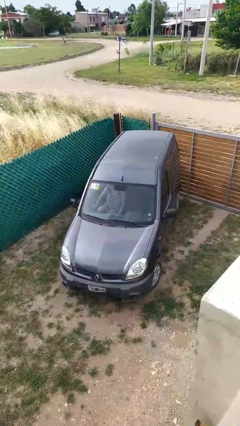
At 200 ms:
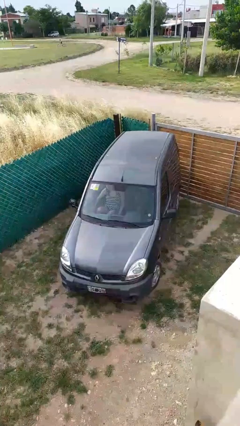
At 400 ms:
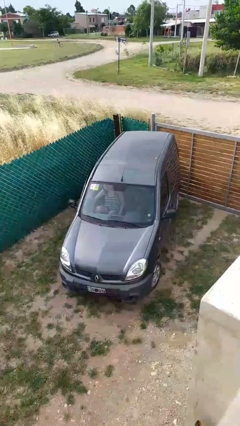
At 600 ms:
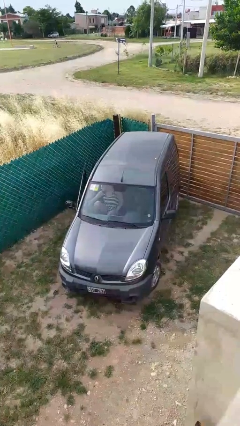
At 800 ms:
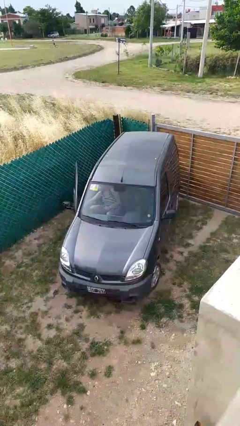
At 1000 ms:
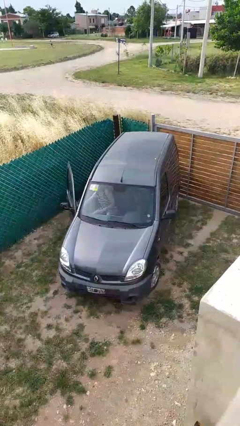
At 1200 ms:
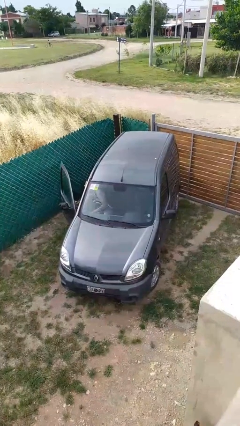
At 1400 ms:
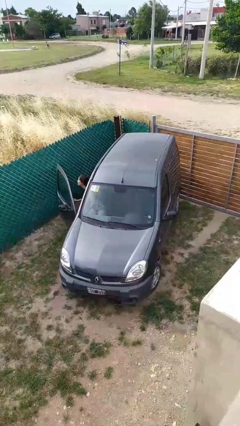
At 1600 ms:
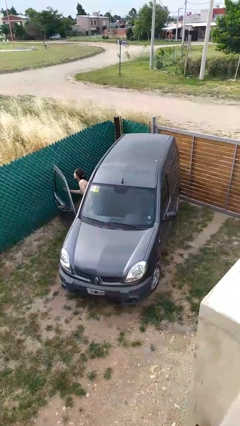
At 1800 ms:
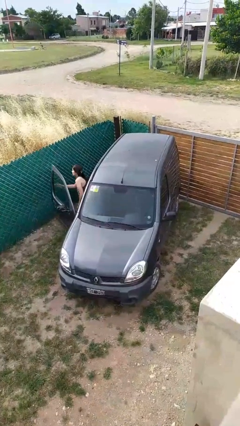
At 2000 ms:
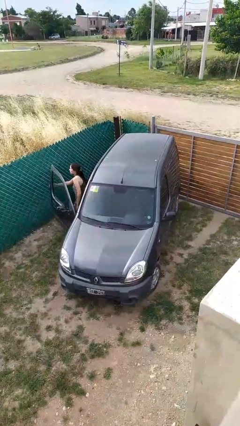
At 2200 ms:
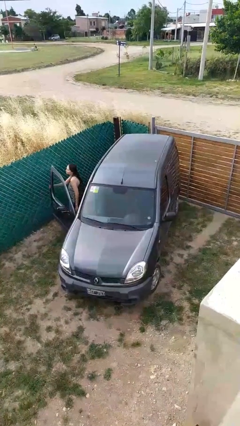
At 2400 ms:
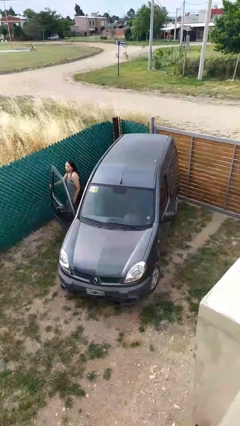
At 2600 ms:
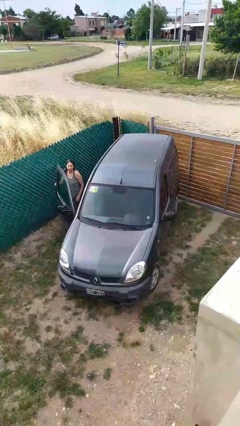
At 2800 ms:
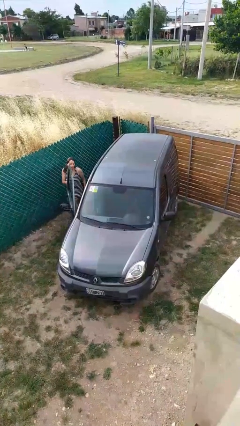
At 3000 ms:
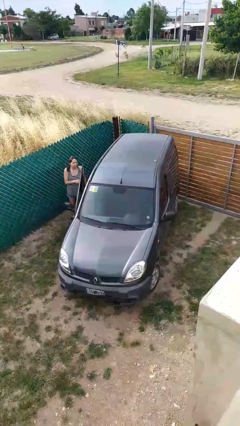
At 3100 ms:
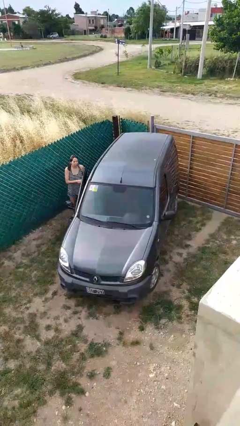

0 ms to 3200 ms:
car drops off person

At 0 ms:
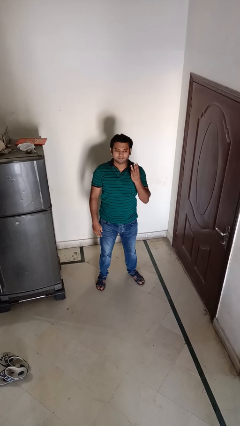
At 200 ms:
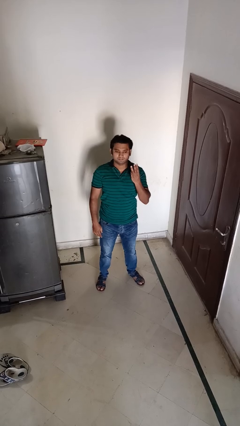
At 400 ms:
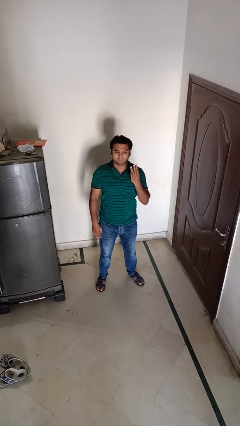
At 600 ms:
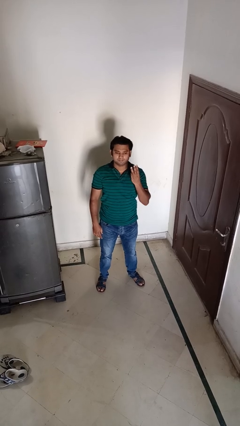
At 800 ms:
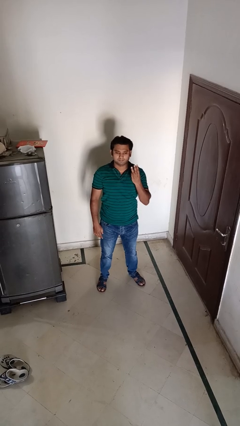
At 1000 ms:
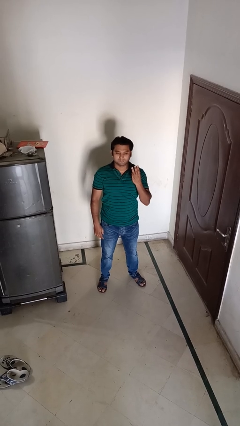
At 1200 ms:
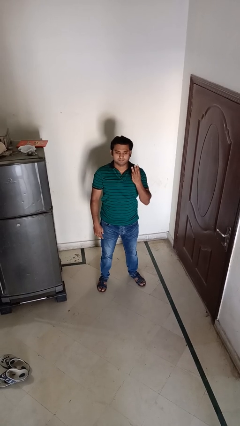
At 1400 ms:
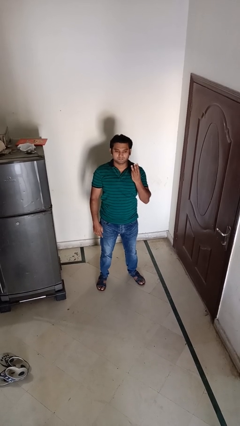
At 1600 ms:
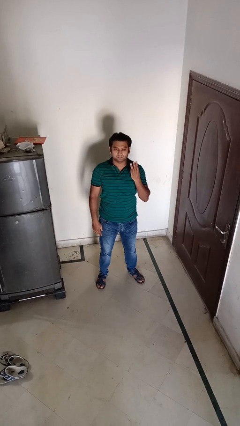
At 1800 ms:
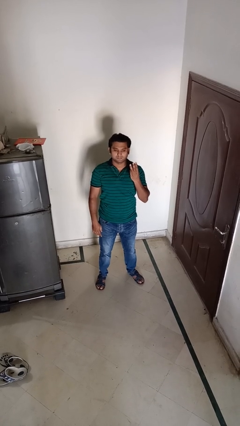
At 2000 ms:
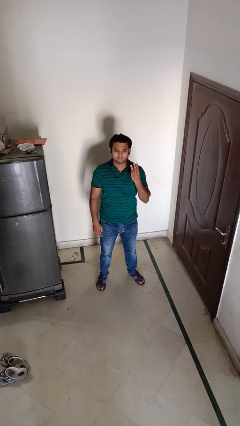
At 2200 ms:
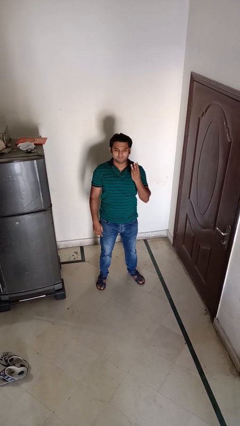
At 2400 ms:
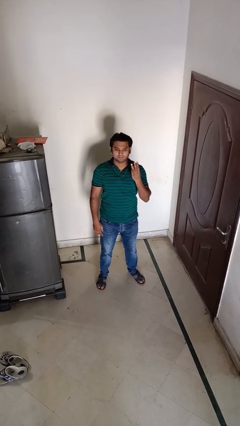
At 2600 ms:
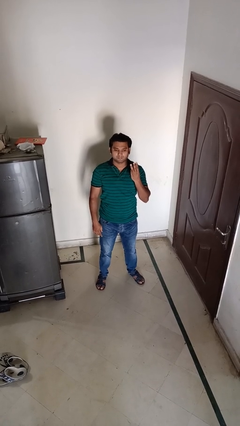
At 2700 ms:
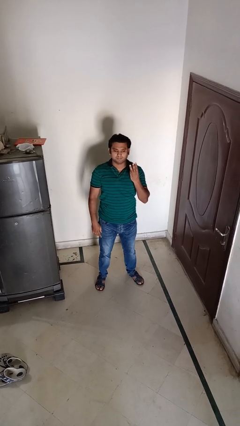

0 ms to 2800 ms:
person gestures number three

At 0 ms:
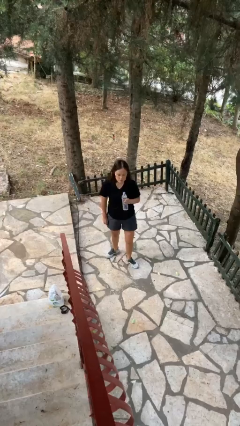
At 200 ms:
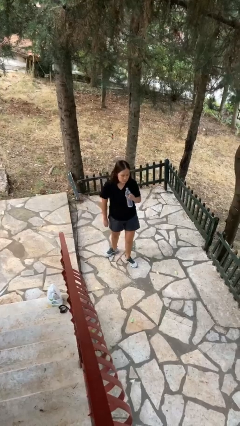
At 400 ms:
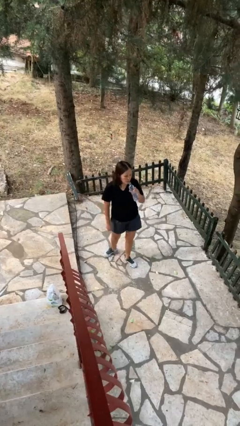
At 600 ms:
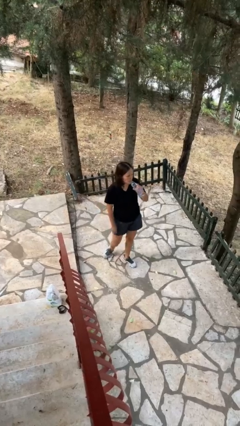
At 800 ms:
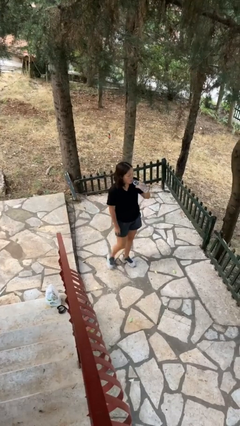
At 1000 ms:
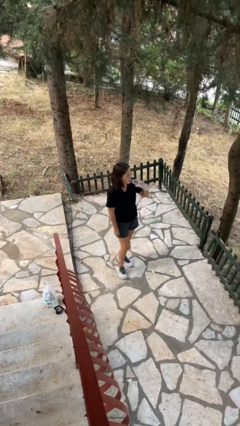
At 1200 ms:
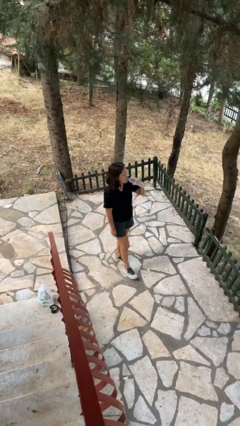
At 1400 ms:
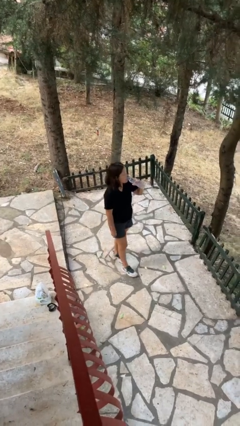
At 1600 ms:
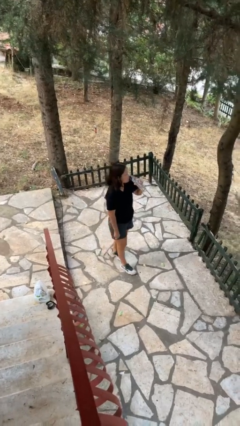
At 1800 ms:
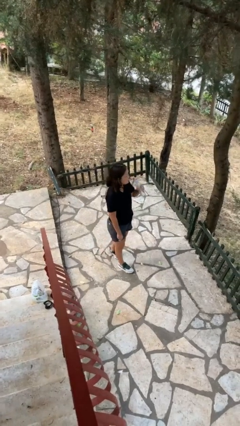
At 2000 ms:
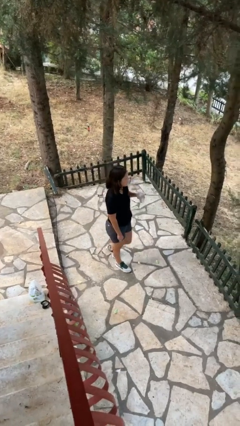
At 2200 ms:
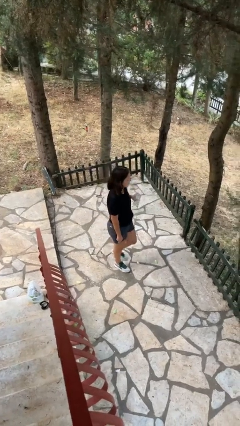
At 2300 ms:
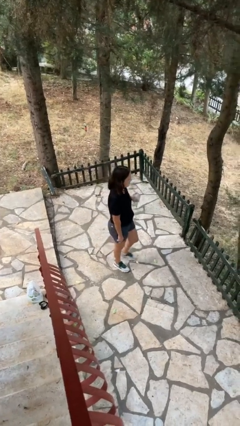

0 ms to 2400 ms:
person drinks from bottle

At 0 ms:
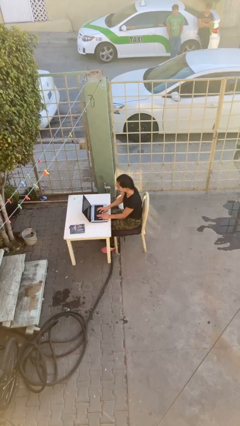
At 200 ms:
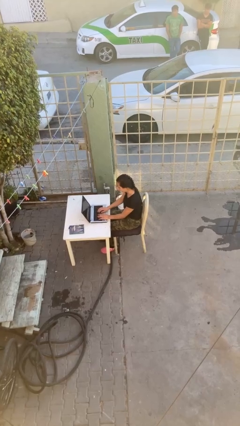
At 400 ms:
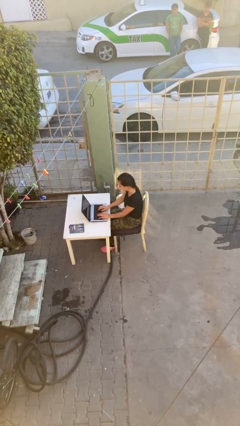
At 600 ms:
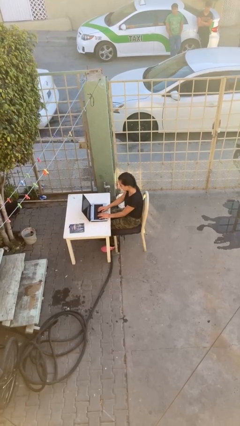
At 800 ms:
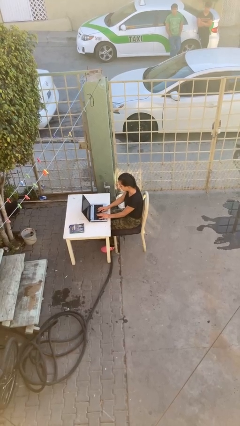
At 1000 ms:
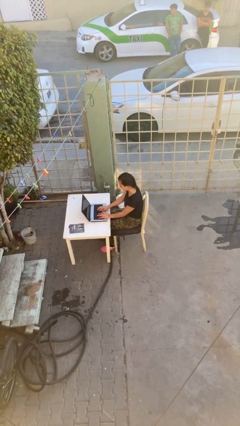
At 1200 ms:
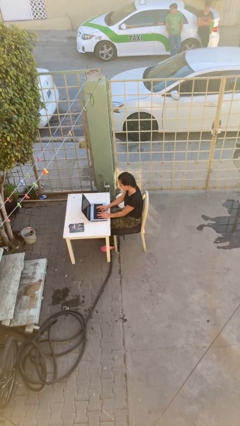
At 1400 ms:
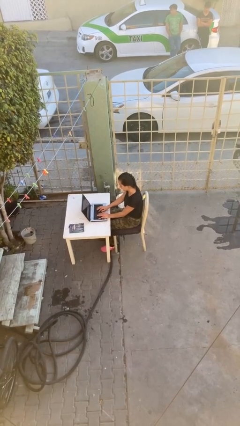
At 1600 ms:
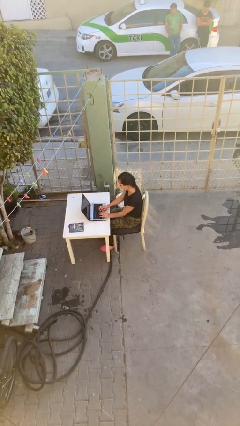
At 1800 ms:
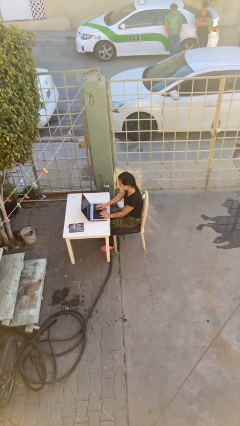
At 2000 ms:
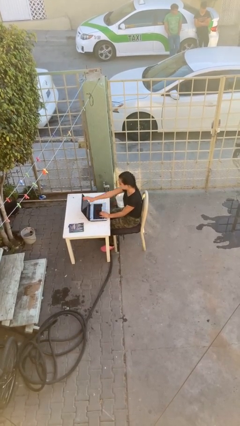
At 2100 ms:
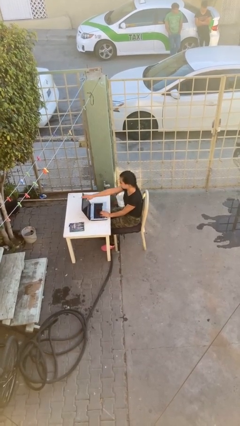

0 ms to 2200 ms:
person interacts with laptop

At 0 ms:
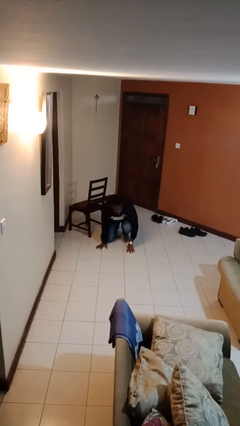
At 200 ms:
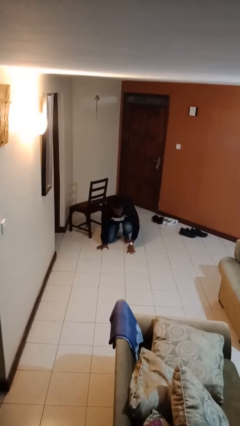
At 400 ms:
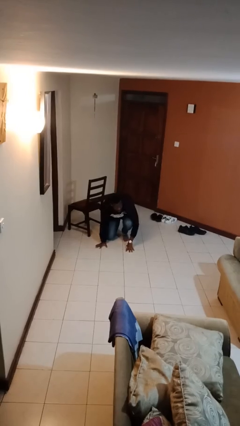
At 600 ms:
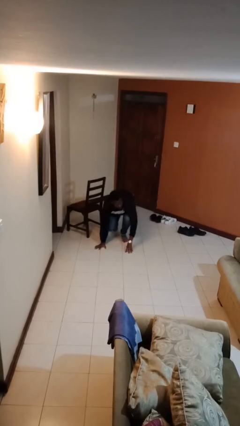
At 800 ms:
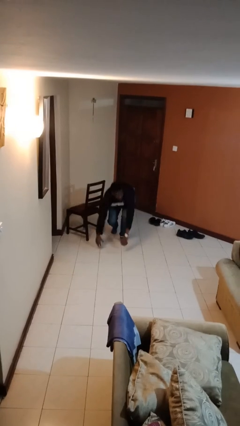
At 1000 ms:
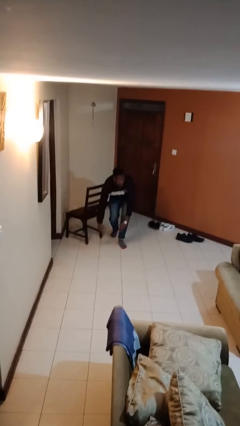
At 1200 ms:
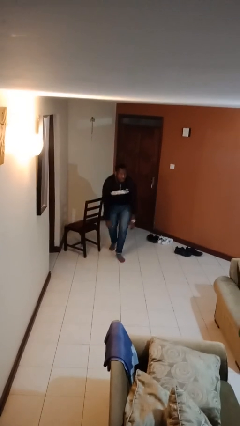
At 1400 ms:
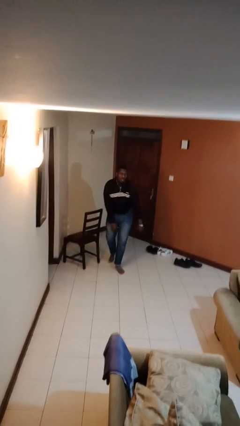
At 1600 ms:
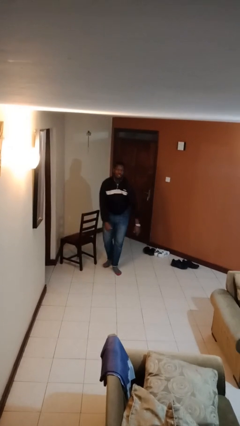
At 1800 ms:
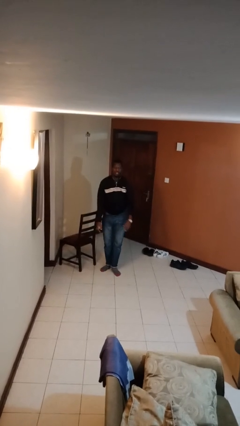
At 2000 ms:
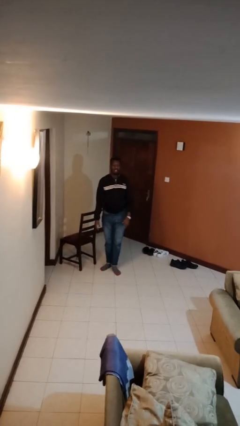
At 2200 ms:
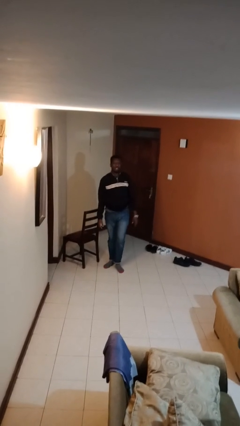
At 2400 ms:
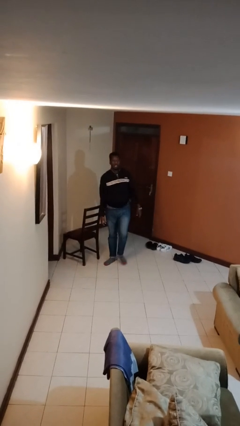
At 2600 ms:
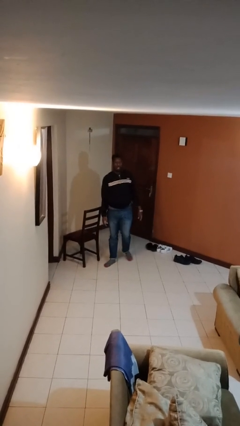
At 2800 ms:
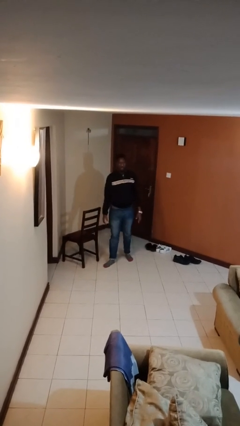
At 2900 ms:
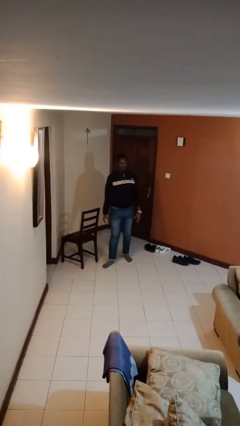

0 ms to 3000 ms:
person stands up from floor

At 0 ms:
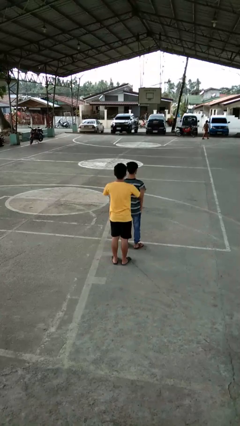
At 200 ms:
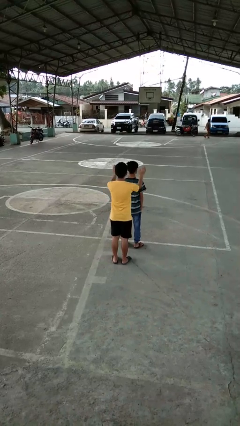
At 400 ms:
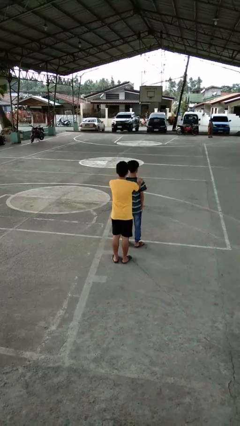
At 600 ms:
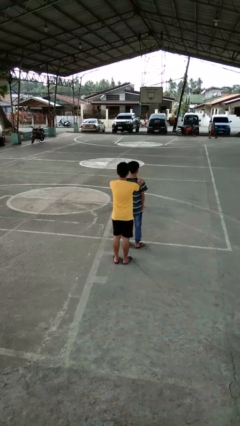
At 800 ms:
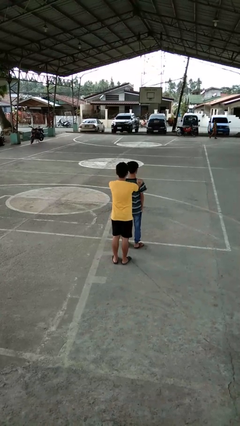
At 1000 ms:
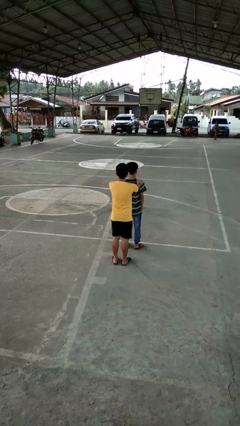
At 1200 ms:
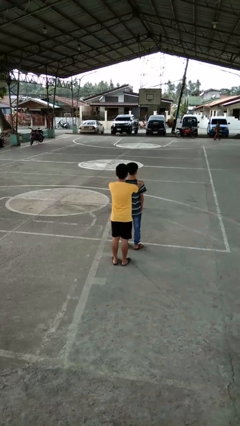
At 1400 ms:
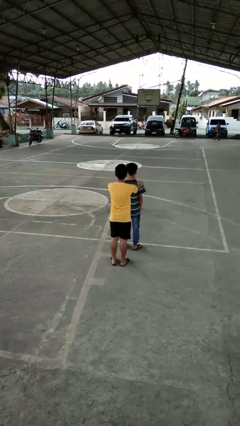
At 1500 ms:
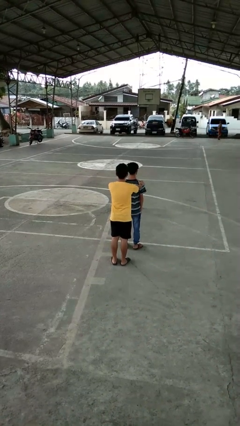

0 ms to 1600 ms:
person grabs person by shoulder

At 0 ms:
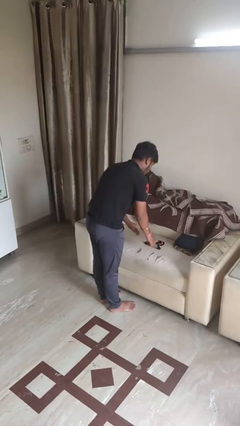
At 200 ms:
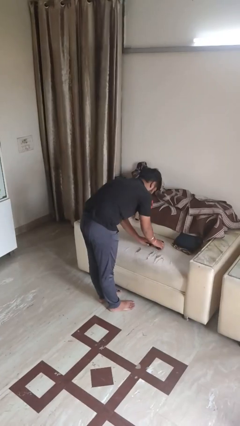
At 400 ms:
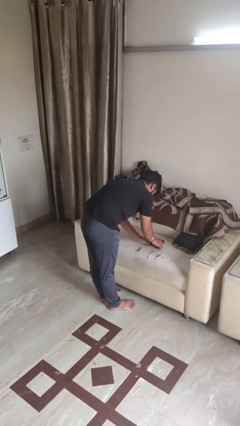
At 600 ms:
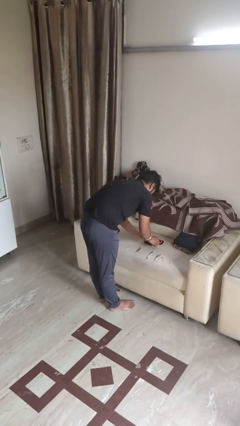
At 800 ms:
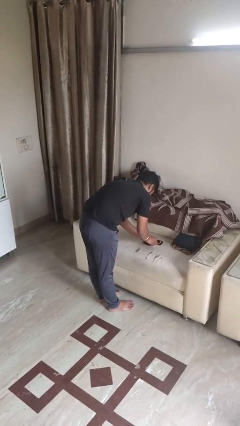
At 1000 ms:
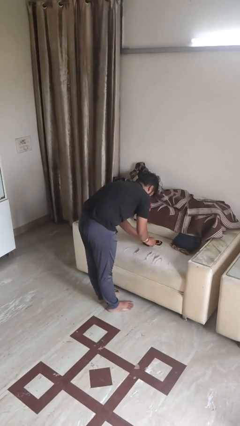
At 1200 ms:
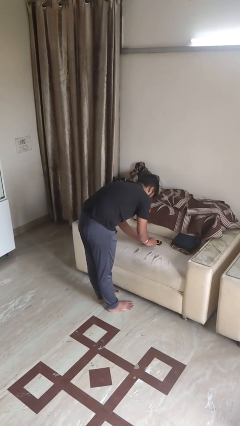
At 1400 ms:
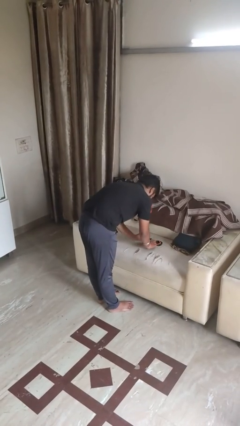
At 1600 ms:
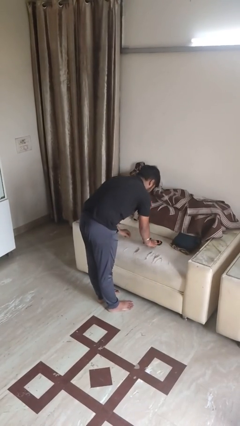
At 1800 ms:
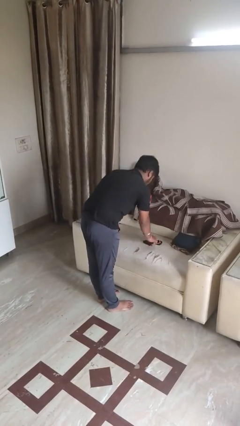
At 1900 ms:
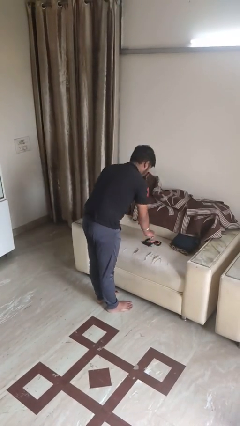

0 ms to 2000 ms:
person folds socks

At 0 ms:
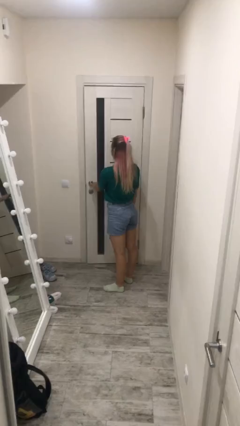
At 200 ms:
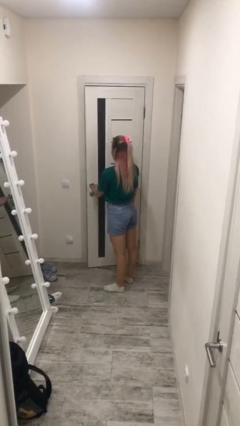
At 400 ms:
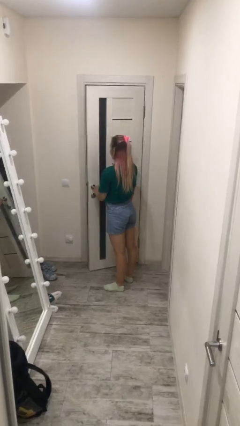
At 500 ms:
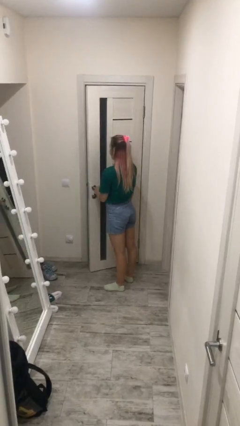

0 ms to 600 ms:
person opens facility door
